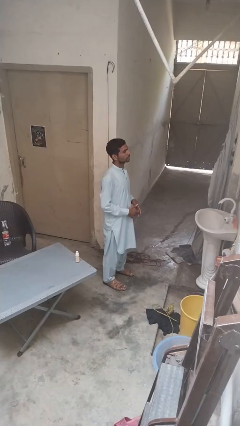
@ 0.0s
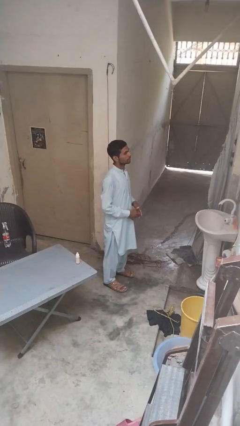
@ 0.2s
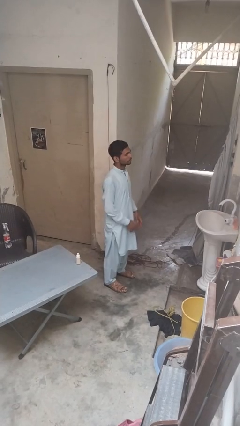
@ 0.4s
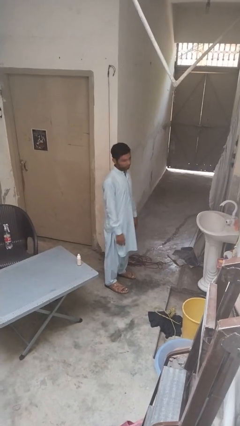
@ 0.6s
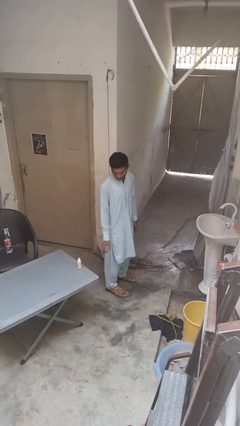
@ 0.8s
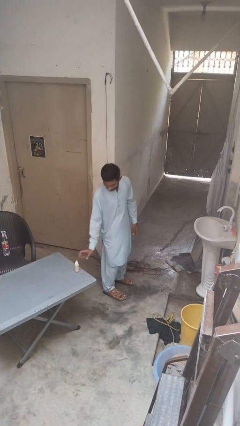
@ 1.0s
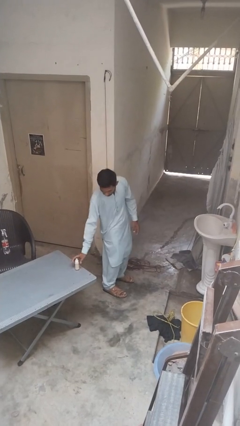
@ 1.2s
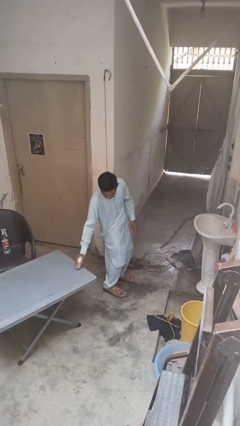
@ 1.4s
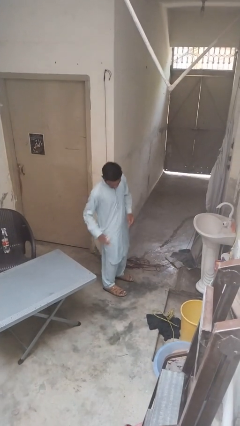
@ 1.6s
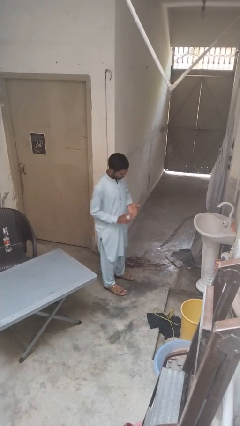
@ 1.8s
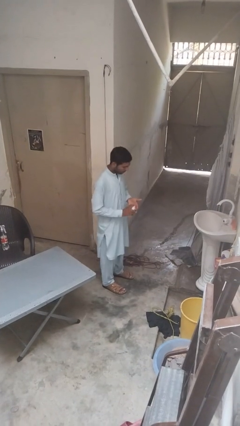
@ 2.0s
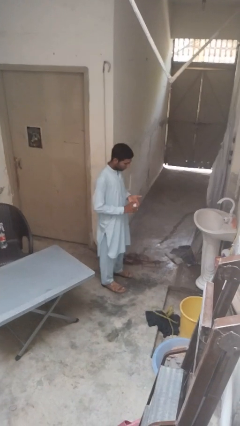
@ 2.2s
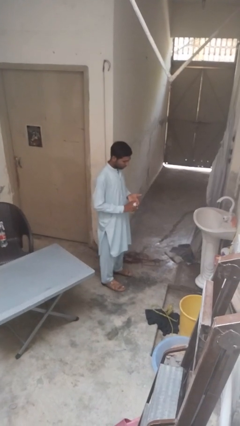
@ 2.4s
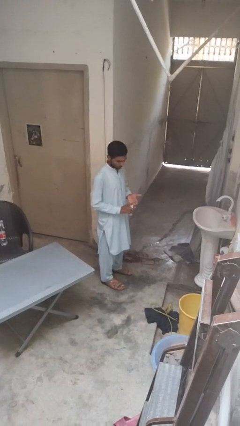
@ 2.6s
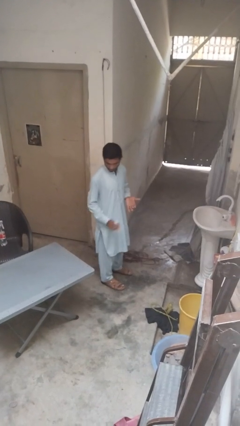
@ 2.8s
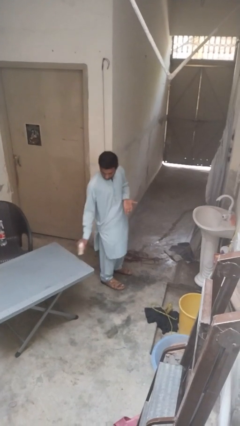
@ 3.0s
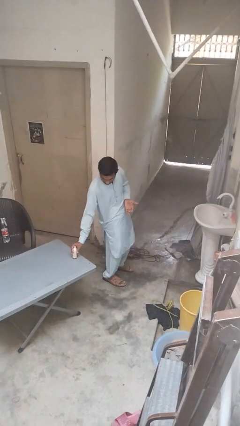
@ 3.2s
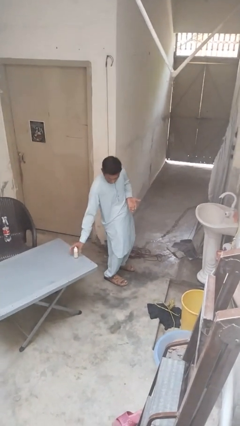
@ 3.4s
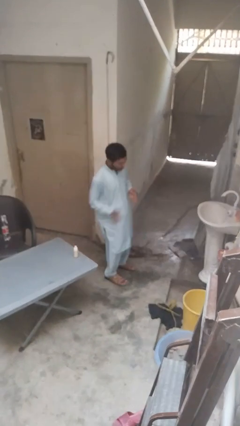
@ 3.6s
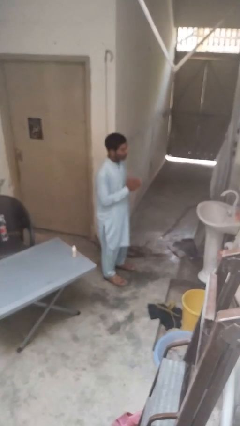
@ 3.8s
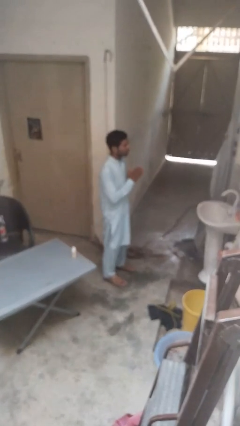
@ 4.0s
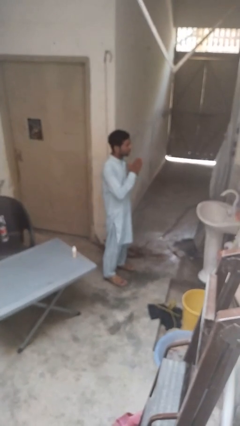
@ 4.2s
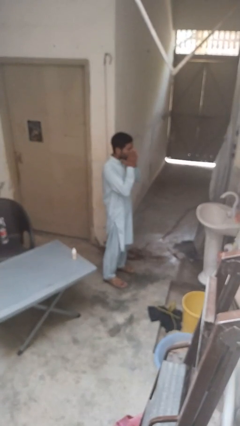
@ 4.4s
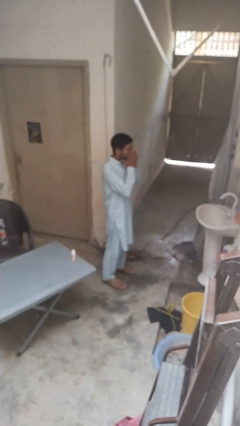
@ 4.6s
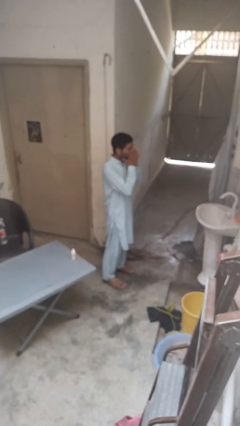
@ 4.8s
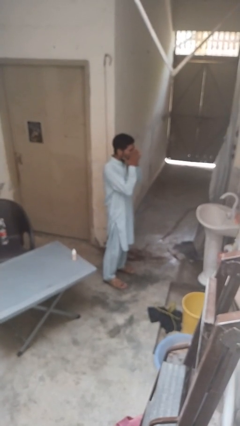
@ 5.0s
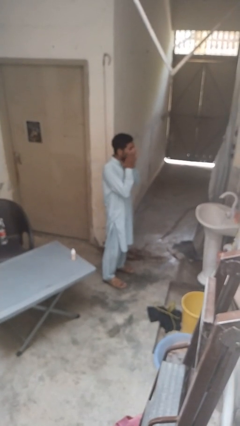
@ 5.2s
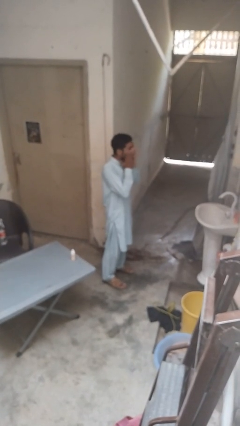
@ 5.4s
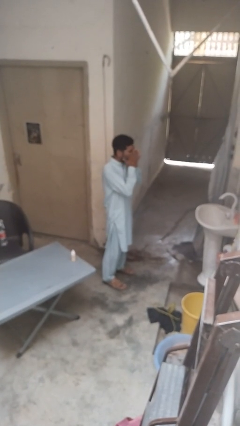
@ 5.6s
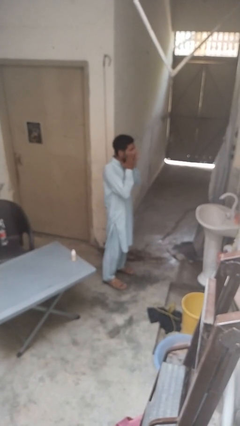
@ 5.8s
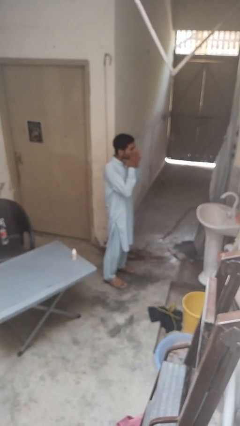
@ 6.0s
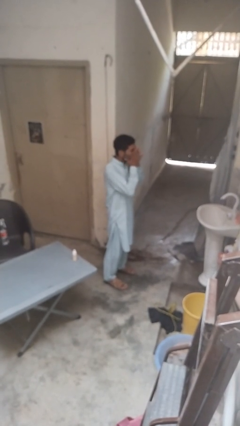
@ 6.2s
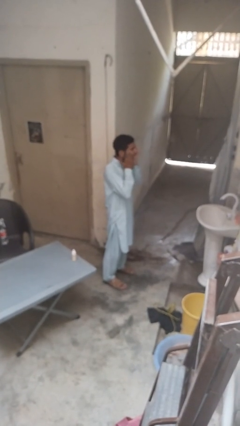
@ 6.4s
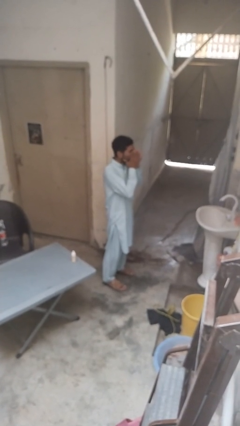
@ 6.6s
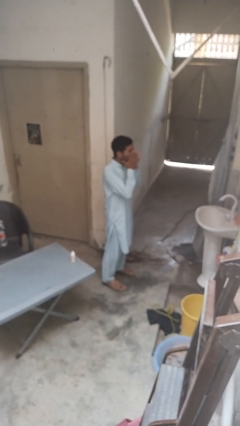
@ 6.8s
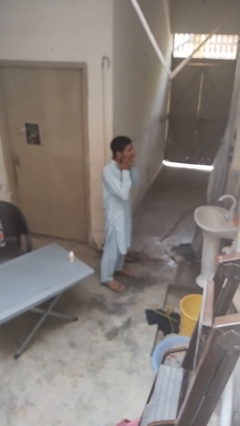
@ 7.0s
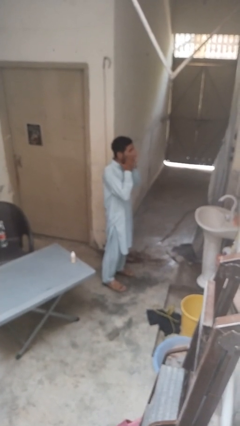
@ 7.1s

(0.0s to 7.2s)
person applies foundation makeup

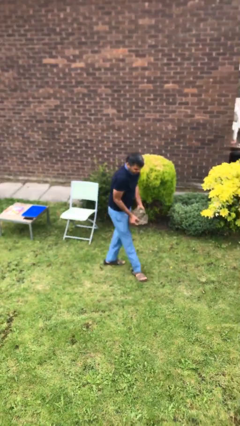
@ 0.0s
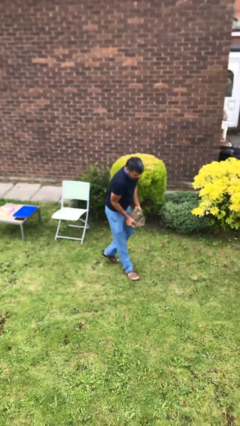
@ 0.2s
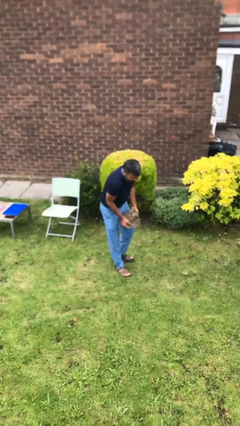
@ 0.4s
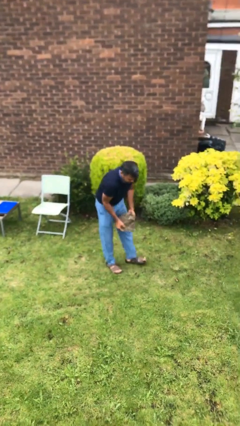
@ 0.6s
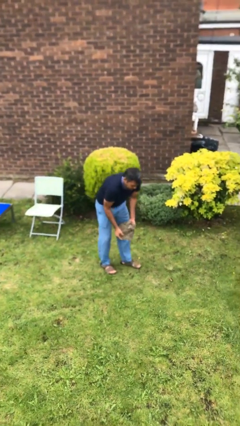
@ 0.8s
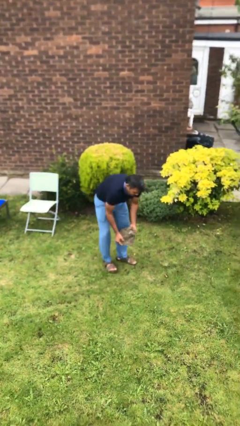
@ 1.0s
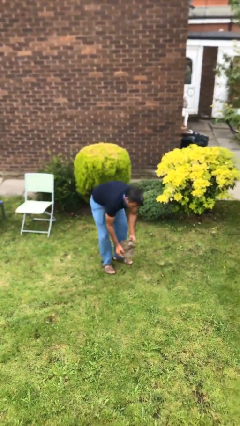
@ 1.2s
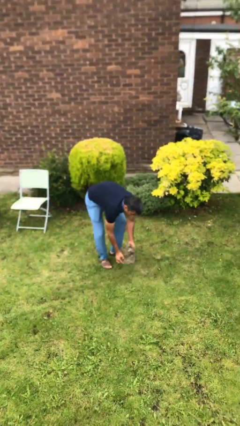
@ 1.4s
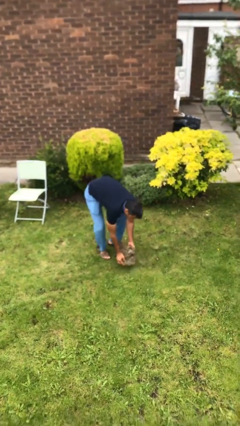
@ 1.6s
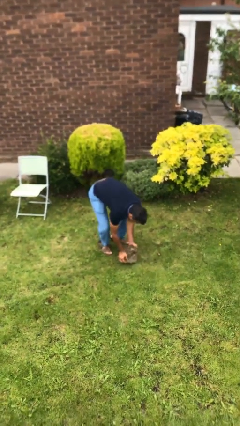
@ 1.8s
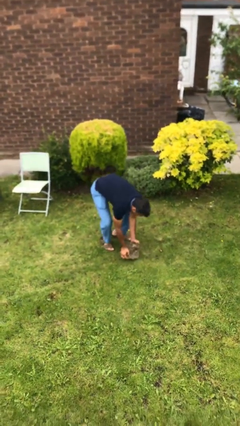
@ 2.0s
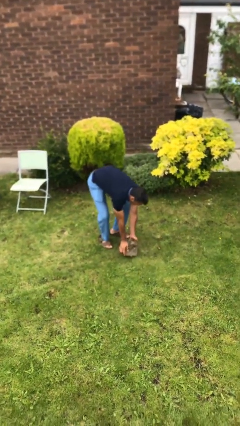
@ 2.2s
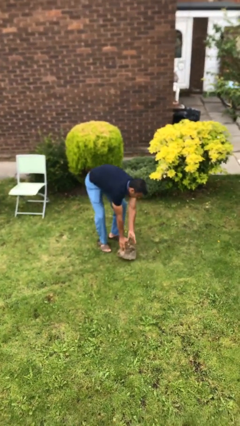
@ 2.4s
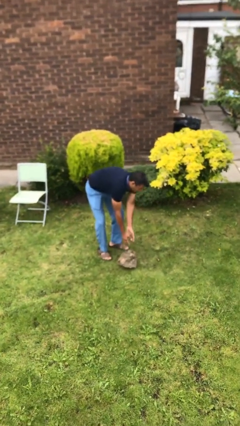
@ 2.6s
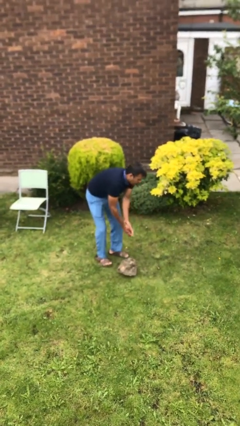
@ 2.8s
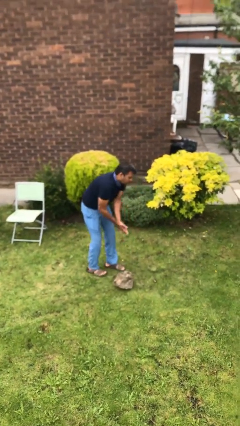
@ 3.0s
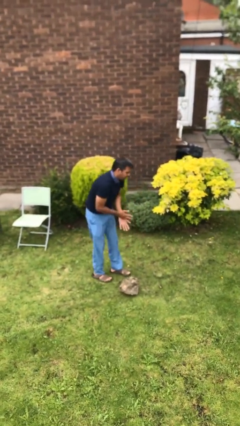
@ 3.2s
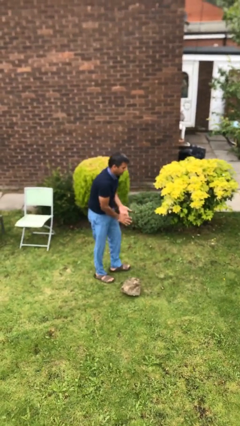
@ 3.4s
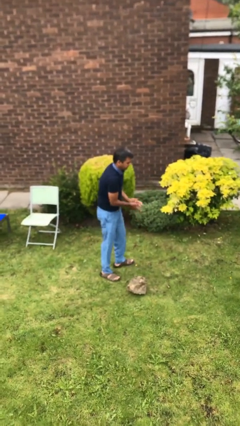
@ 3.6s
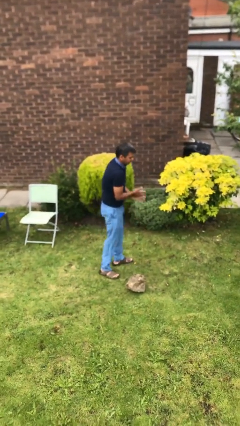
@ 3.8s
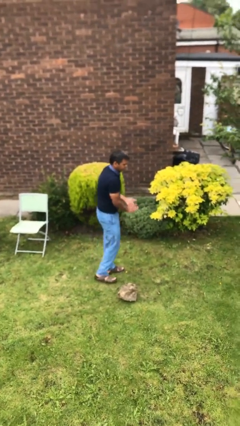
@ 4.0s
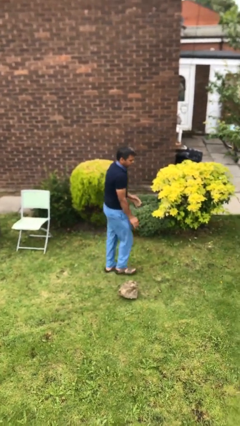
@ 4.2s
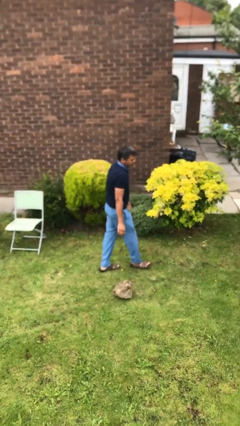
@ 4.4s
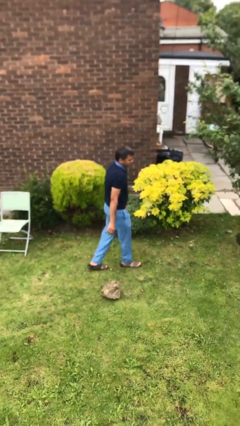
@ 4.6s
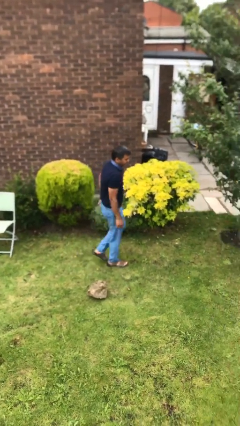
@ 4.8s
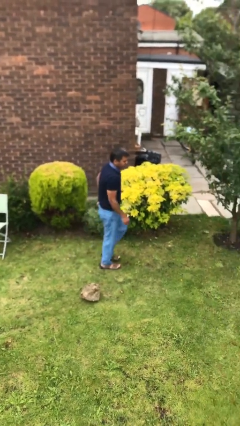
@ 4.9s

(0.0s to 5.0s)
person puts down object on floor

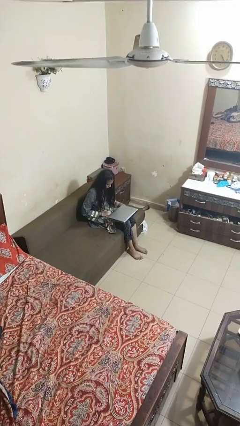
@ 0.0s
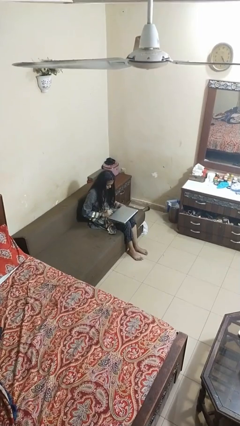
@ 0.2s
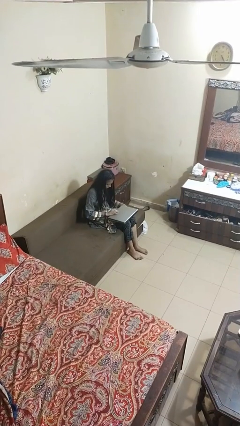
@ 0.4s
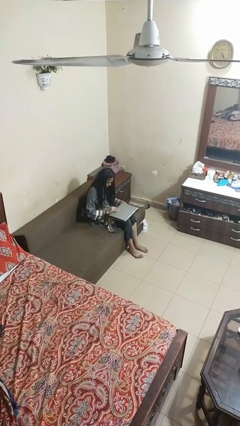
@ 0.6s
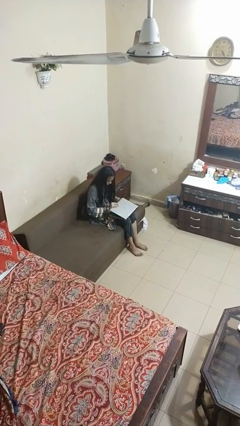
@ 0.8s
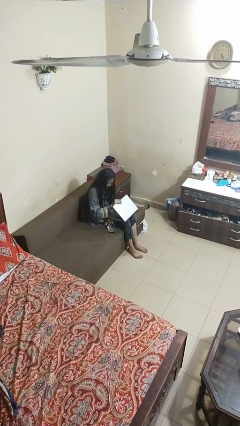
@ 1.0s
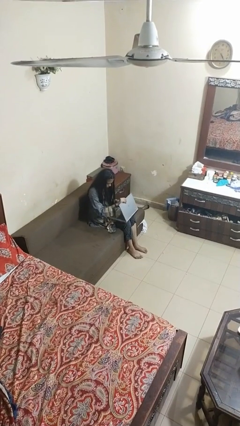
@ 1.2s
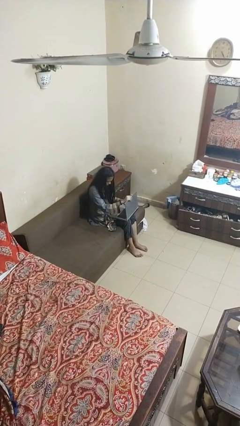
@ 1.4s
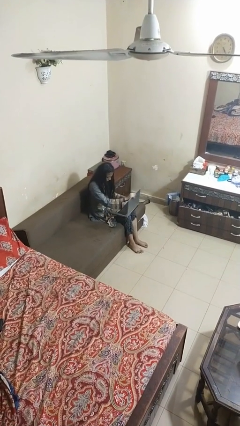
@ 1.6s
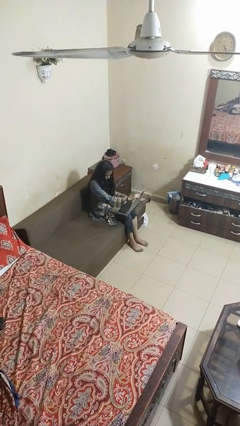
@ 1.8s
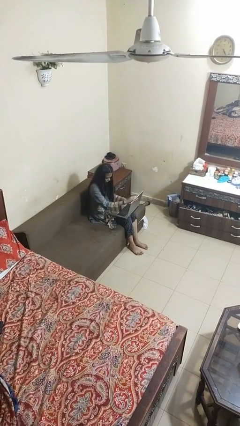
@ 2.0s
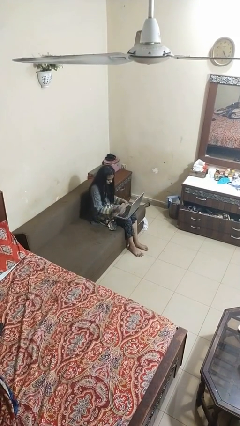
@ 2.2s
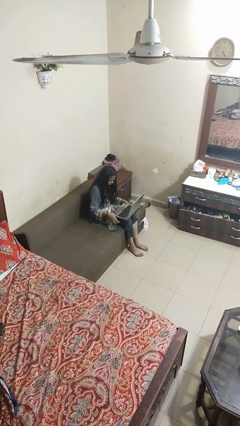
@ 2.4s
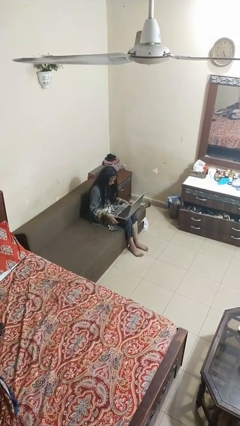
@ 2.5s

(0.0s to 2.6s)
person opens laptop

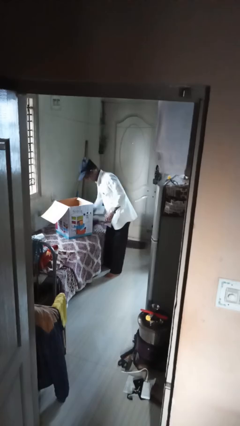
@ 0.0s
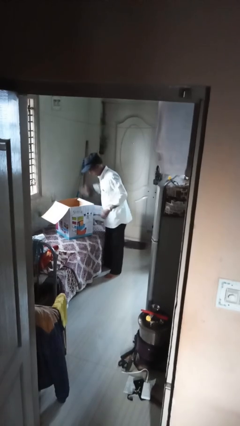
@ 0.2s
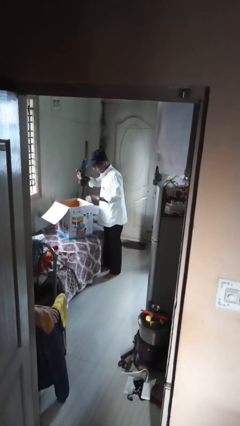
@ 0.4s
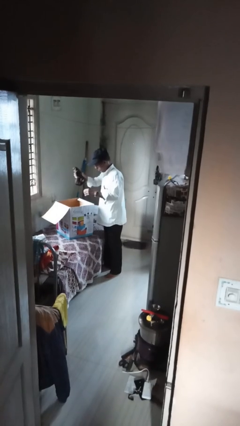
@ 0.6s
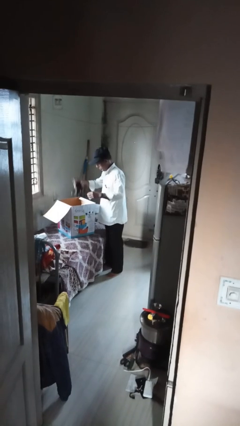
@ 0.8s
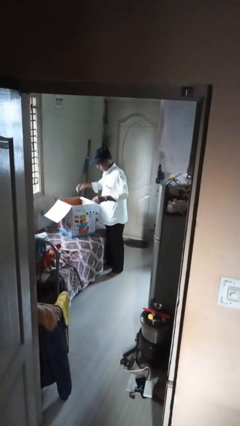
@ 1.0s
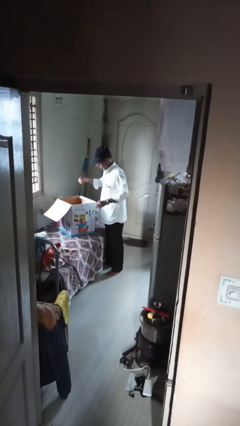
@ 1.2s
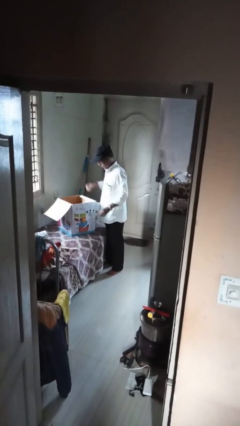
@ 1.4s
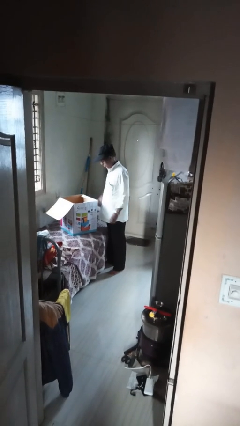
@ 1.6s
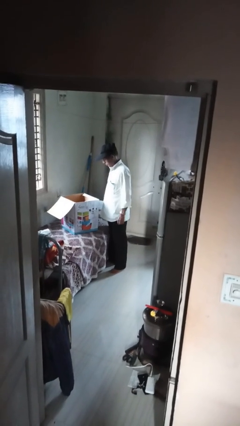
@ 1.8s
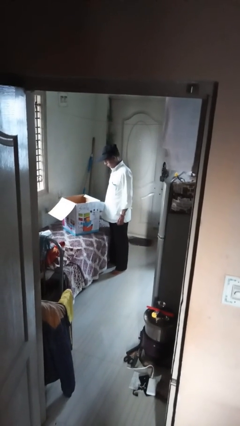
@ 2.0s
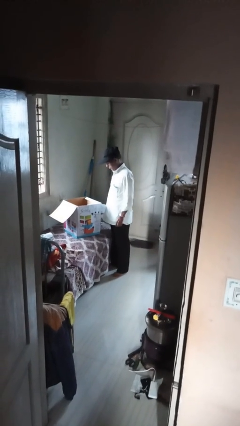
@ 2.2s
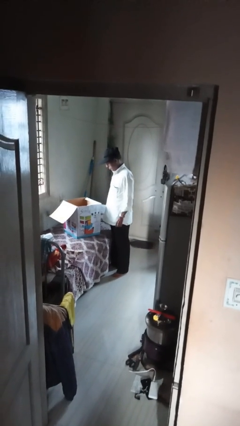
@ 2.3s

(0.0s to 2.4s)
person puts object into box

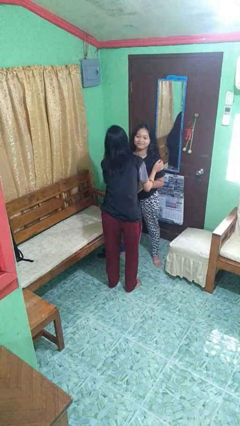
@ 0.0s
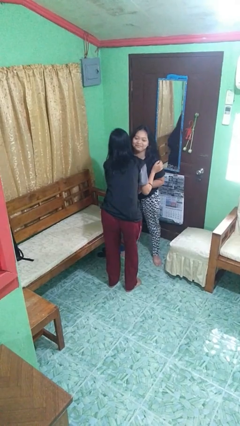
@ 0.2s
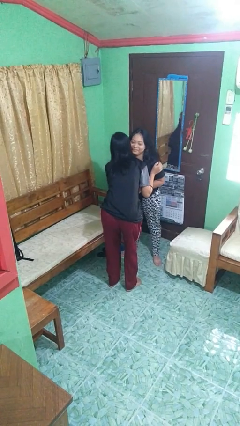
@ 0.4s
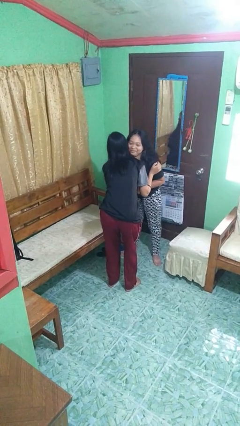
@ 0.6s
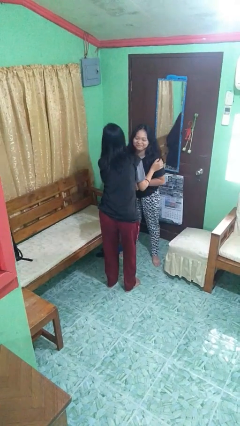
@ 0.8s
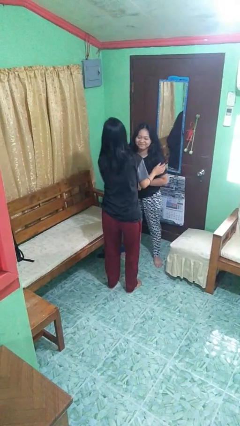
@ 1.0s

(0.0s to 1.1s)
person kisses cheek of person
